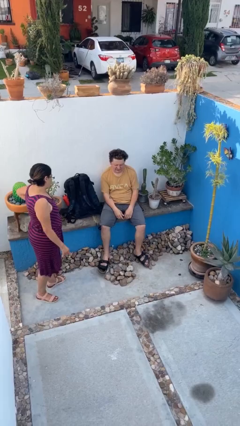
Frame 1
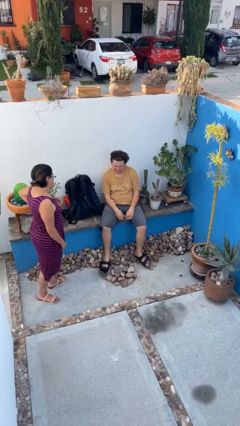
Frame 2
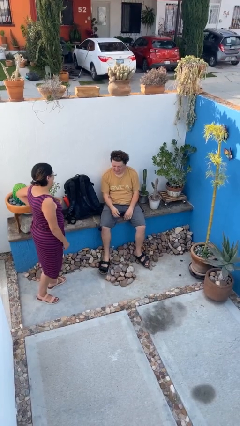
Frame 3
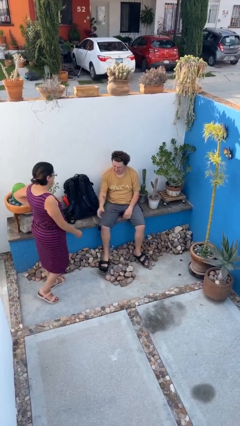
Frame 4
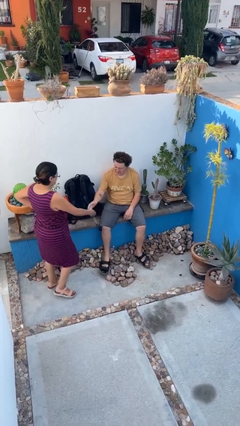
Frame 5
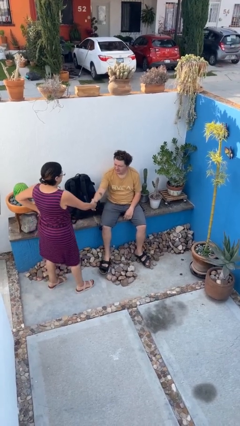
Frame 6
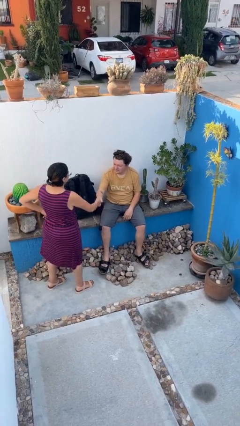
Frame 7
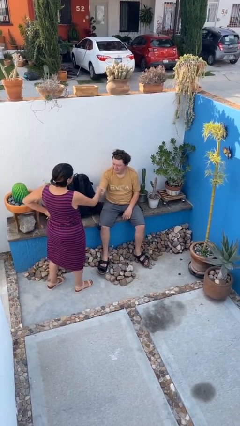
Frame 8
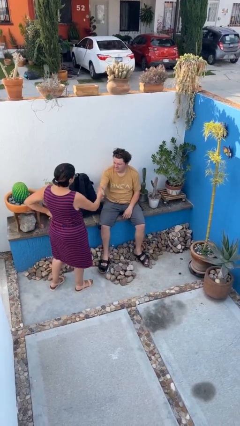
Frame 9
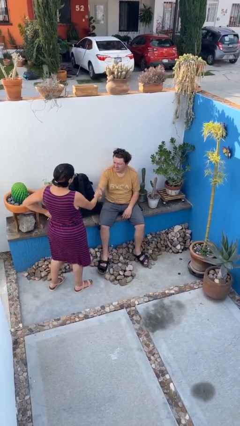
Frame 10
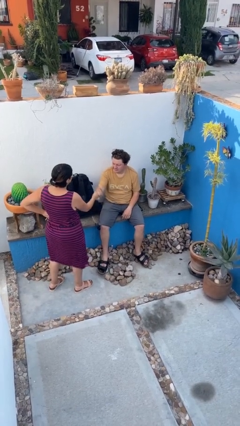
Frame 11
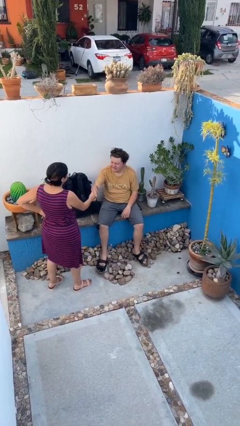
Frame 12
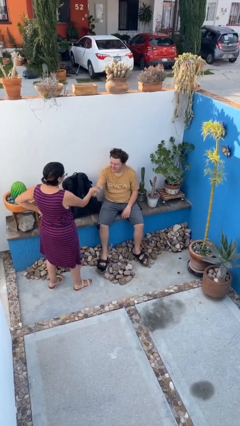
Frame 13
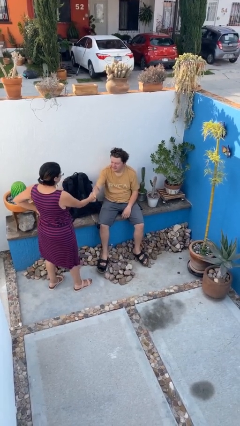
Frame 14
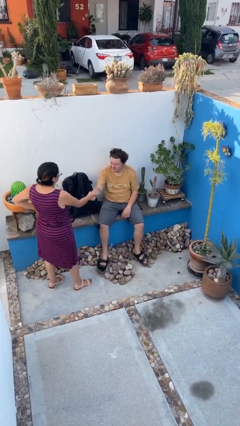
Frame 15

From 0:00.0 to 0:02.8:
person shakes hand

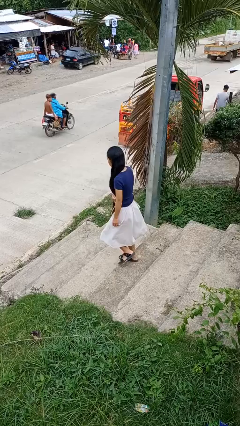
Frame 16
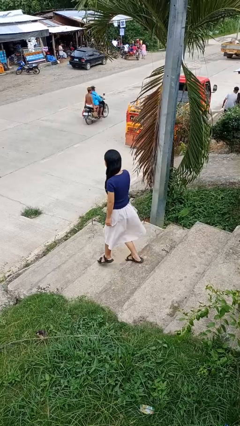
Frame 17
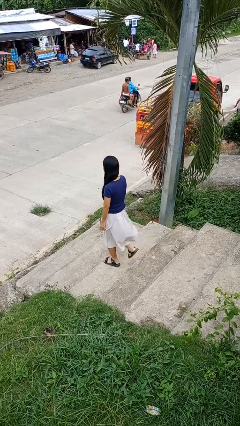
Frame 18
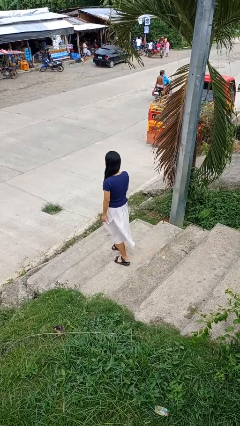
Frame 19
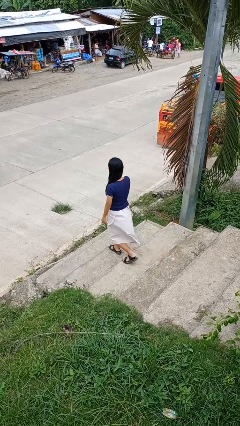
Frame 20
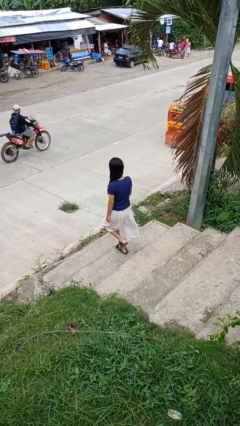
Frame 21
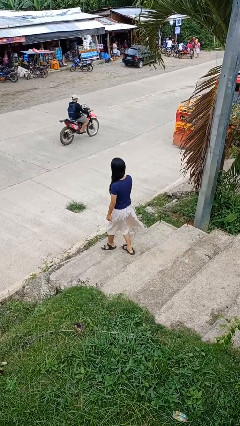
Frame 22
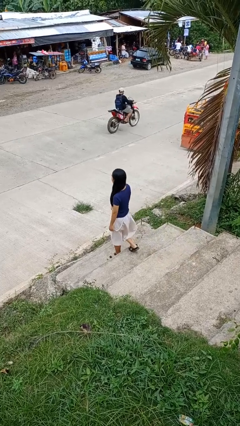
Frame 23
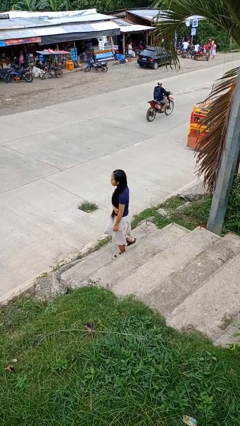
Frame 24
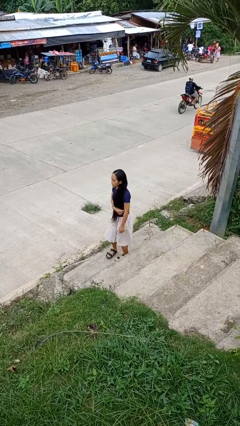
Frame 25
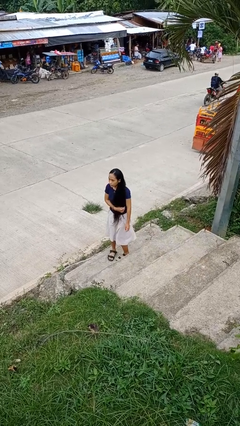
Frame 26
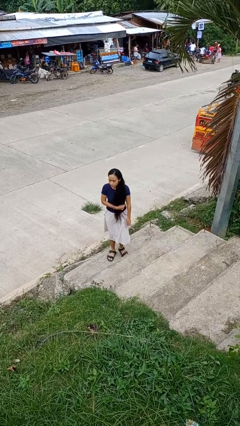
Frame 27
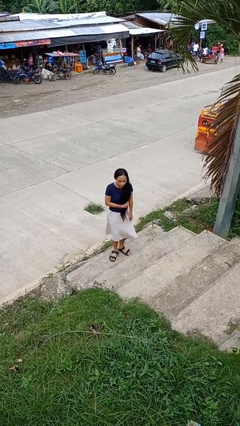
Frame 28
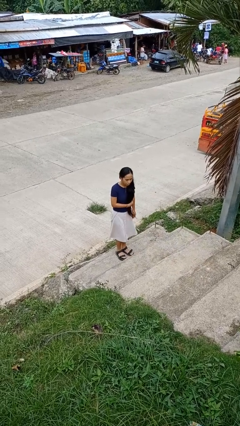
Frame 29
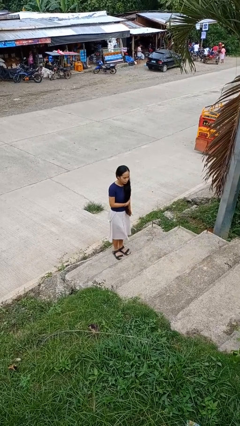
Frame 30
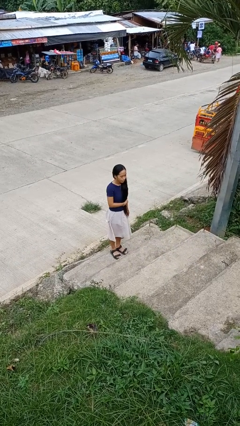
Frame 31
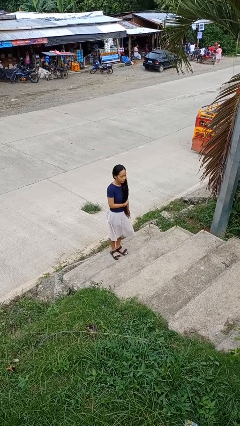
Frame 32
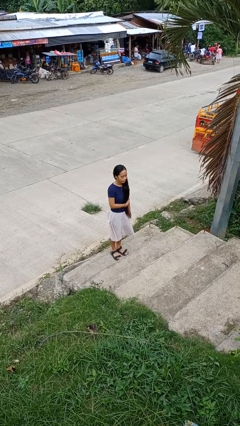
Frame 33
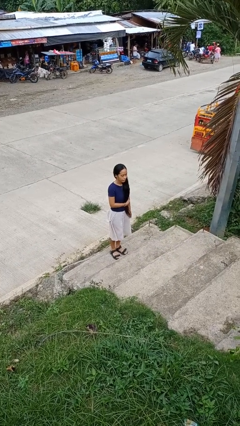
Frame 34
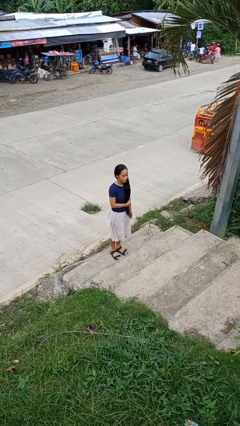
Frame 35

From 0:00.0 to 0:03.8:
person climbs down stairs

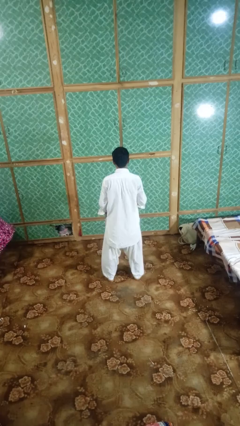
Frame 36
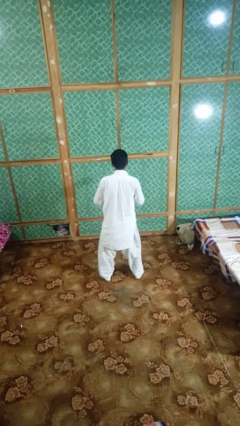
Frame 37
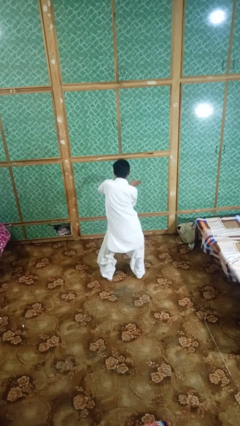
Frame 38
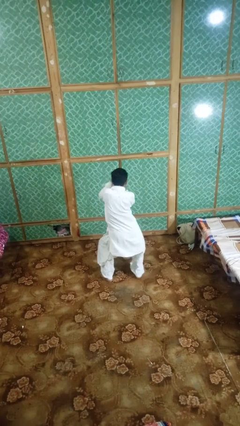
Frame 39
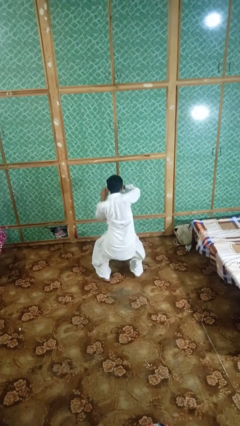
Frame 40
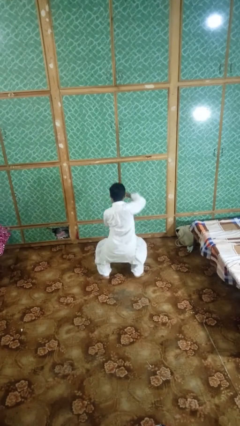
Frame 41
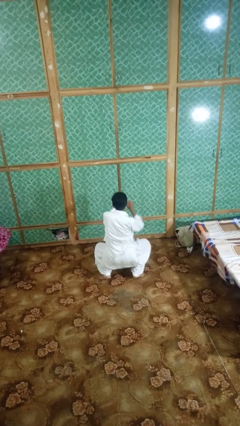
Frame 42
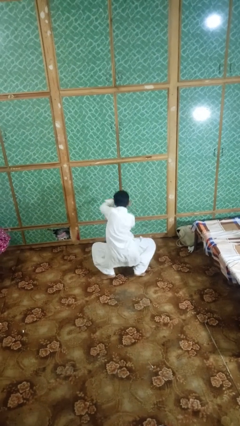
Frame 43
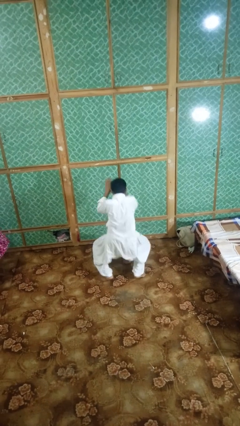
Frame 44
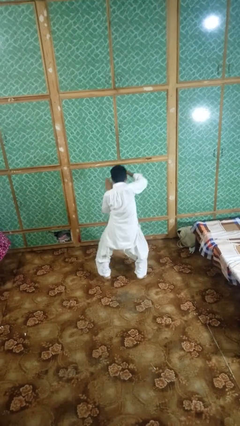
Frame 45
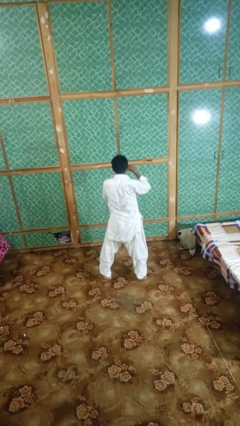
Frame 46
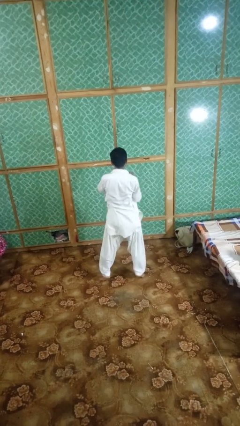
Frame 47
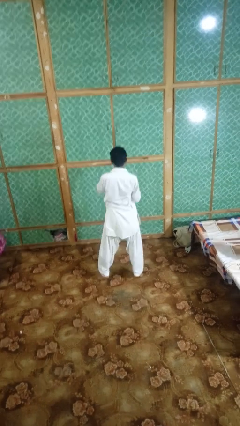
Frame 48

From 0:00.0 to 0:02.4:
person dances in place

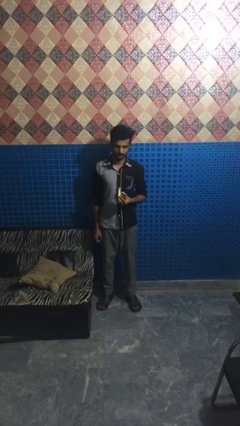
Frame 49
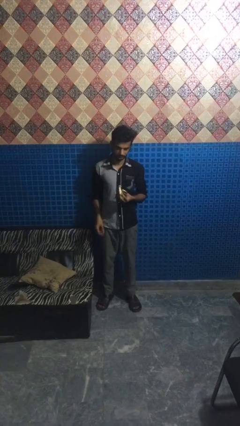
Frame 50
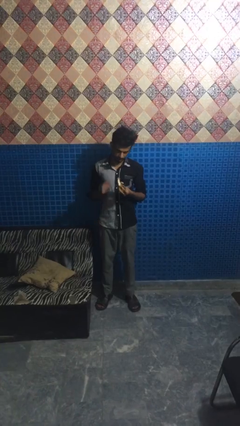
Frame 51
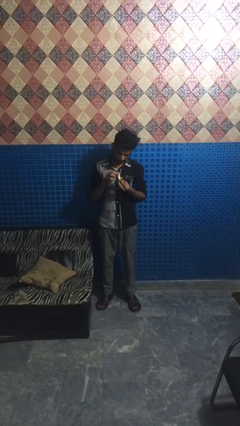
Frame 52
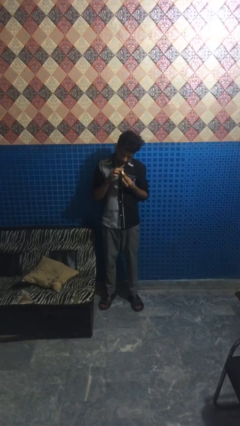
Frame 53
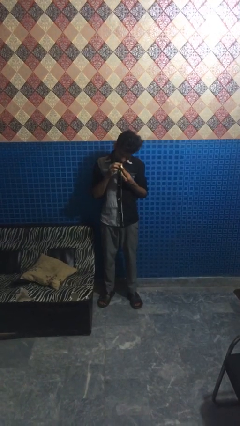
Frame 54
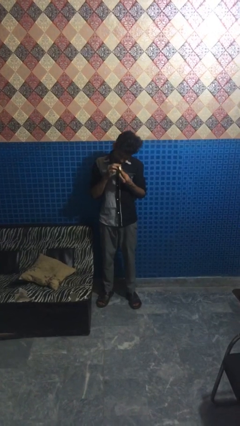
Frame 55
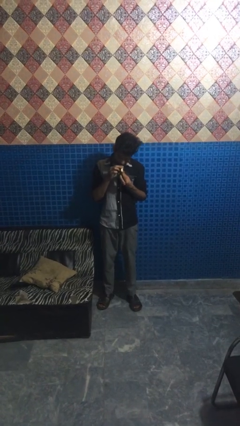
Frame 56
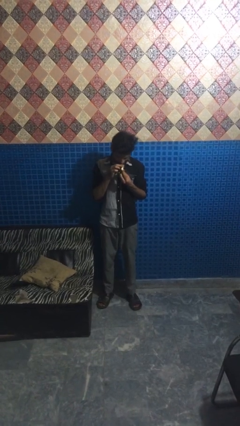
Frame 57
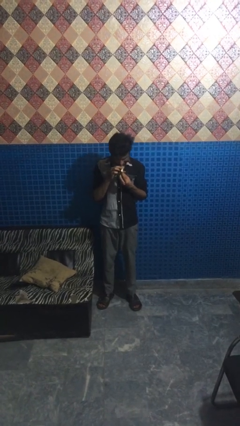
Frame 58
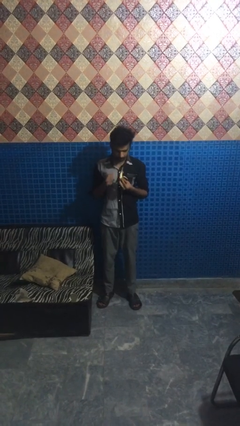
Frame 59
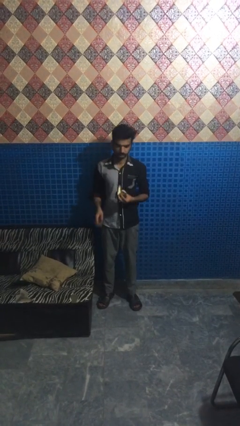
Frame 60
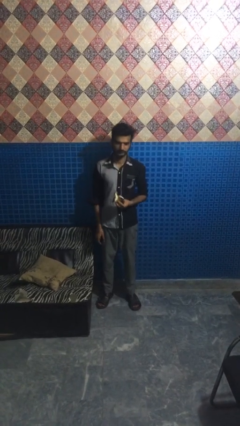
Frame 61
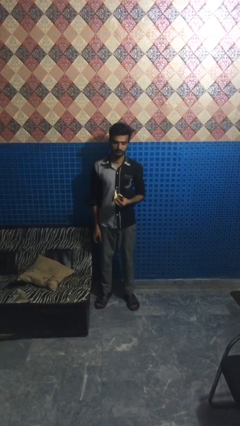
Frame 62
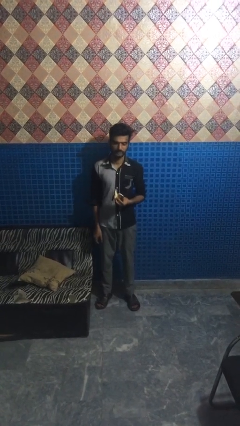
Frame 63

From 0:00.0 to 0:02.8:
person eats banana

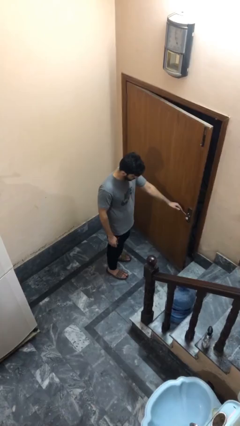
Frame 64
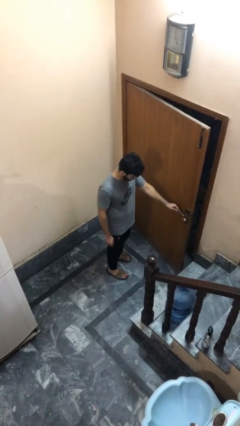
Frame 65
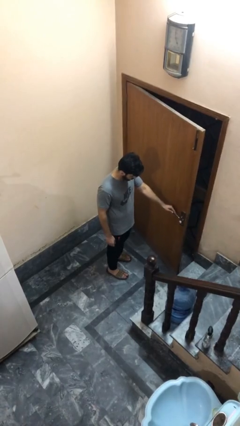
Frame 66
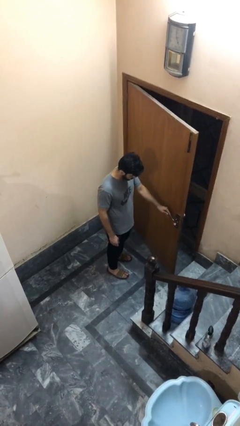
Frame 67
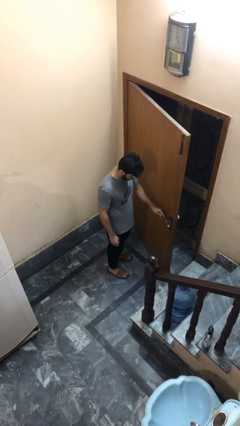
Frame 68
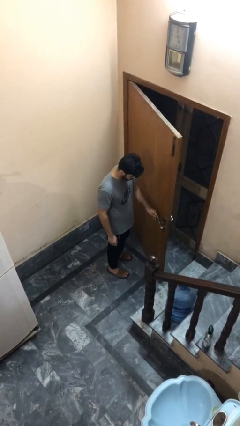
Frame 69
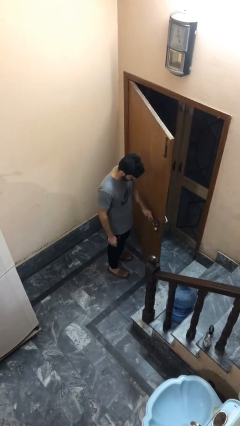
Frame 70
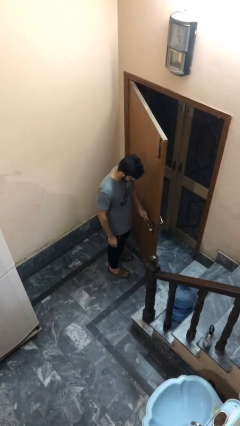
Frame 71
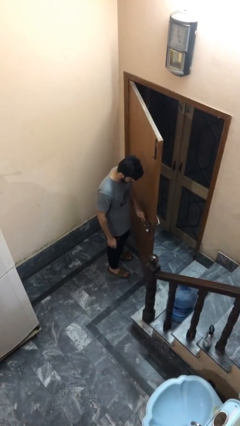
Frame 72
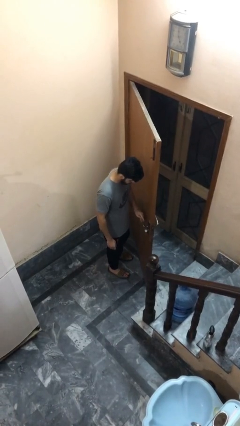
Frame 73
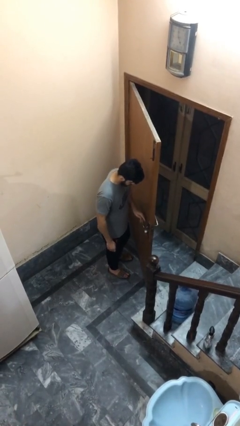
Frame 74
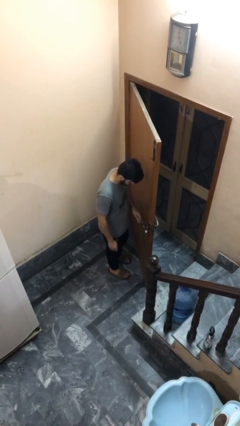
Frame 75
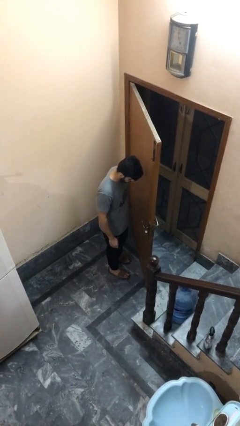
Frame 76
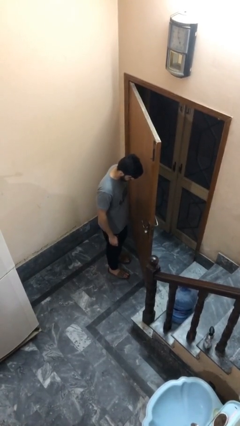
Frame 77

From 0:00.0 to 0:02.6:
person opens facility door

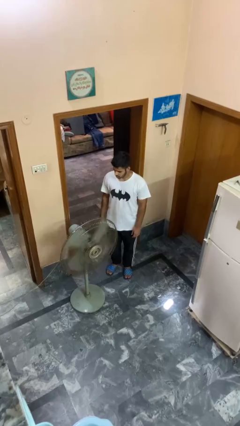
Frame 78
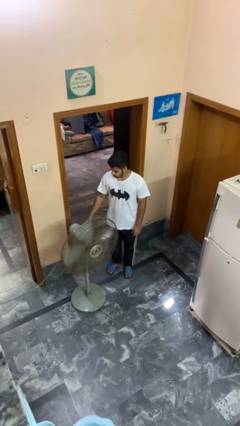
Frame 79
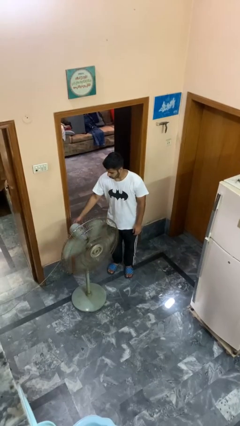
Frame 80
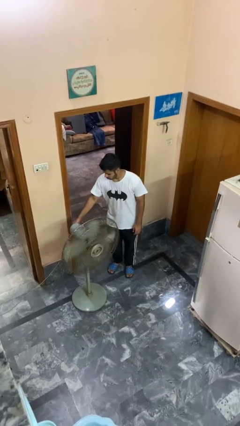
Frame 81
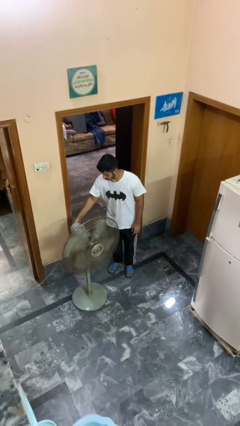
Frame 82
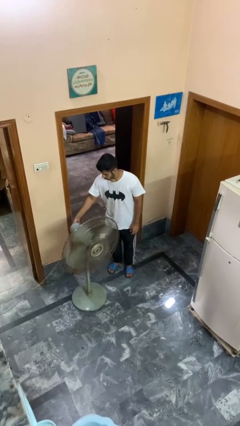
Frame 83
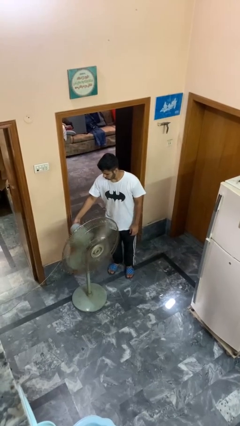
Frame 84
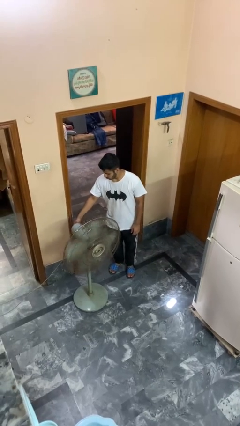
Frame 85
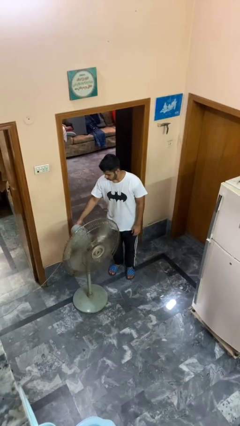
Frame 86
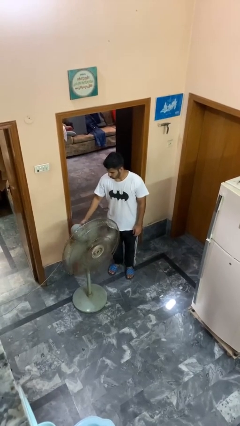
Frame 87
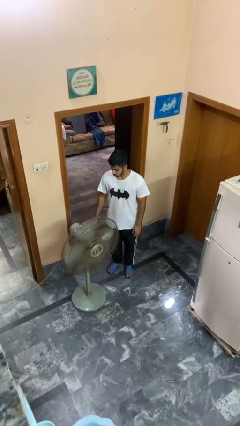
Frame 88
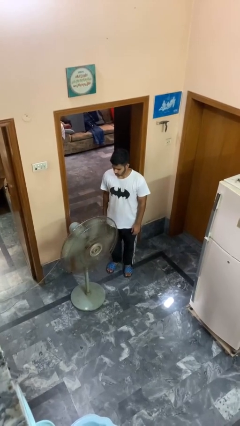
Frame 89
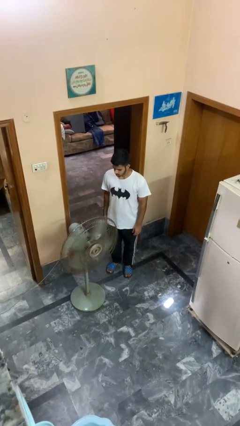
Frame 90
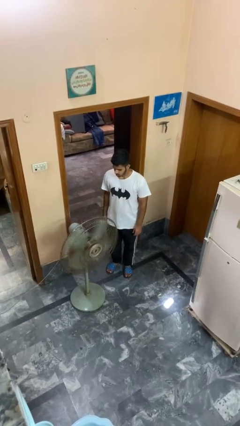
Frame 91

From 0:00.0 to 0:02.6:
person turns on fan

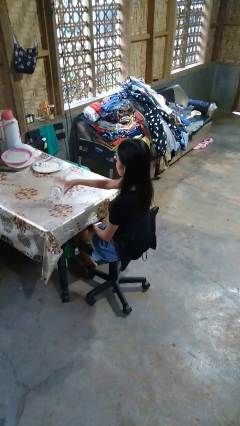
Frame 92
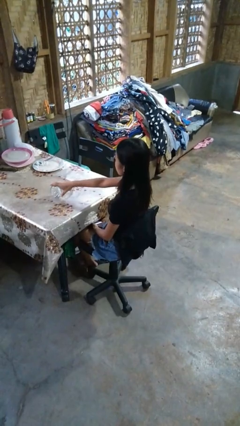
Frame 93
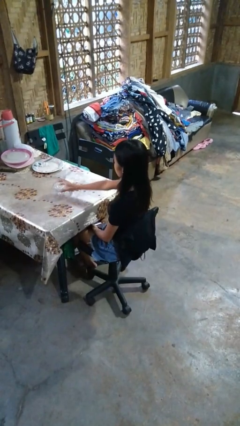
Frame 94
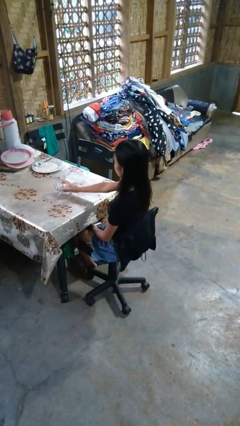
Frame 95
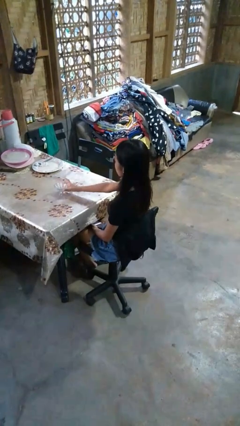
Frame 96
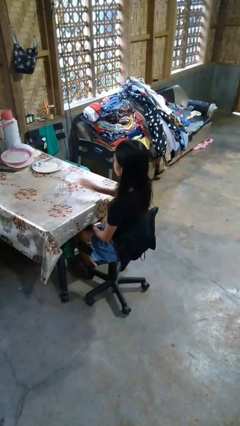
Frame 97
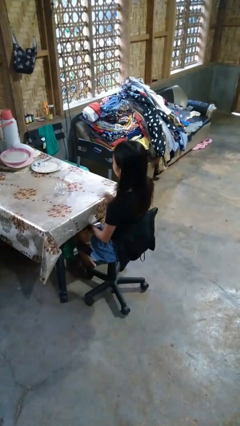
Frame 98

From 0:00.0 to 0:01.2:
person sets upright glass
